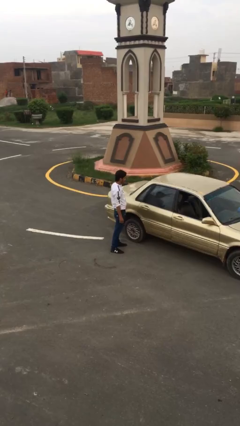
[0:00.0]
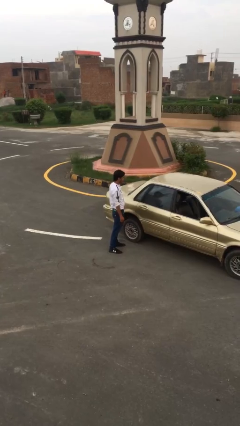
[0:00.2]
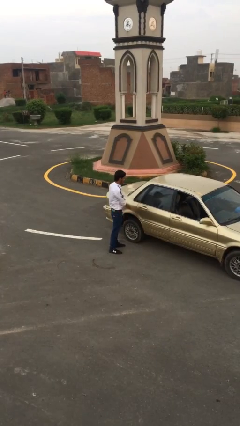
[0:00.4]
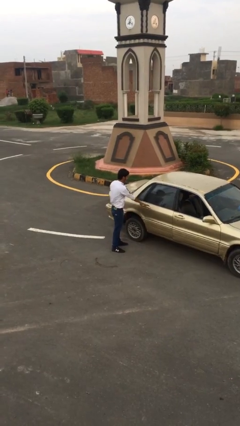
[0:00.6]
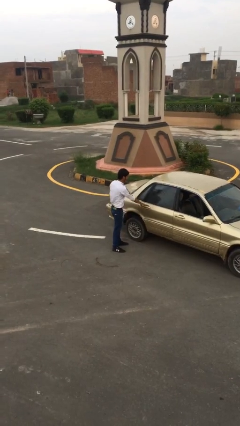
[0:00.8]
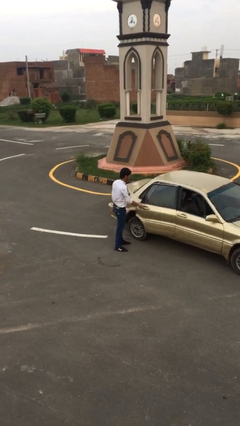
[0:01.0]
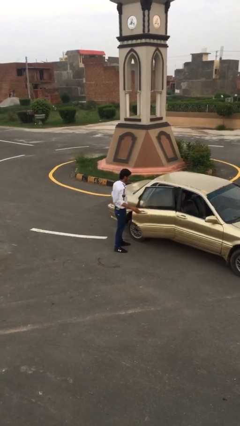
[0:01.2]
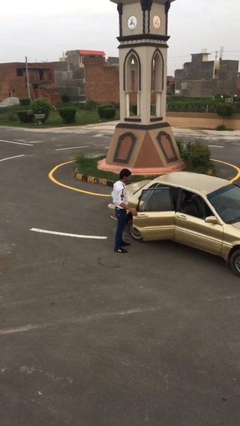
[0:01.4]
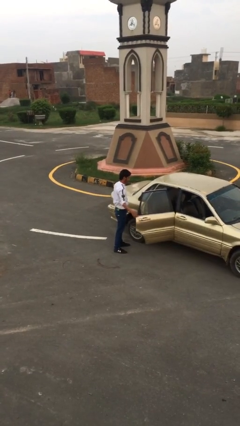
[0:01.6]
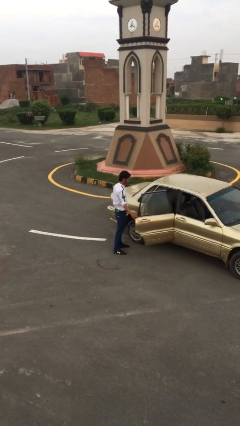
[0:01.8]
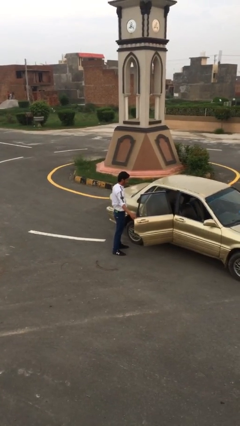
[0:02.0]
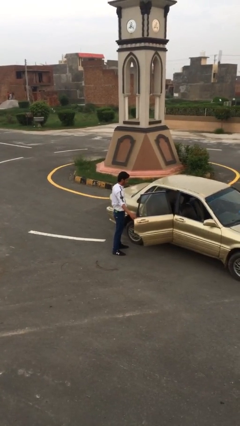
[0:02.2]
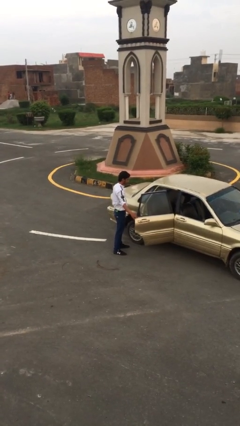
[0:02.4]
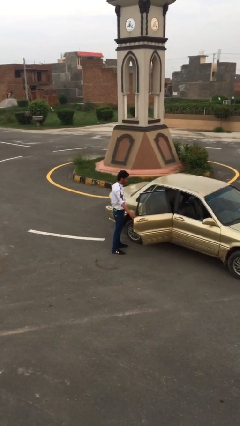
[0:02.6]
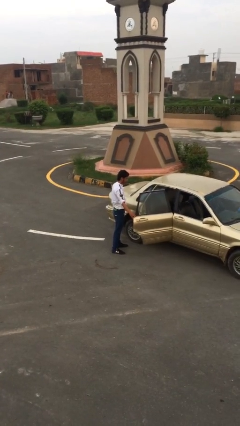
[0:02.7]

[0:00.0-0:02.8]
person opens car door

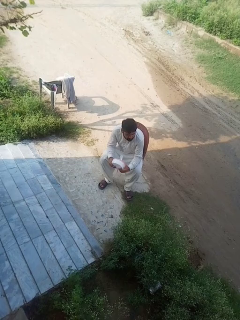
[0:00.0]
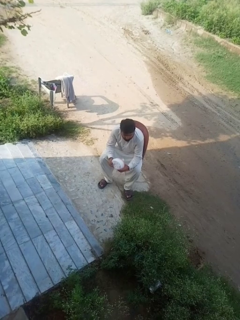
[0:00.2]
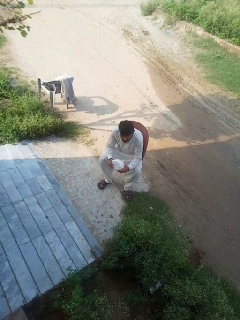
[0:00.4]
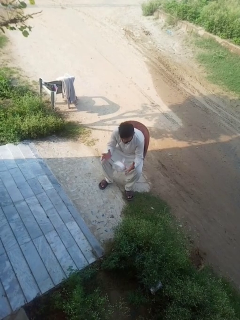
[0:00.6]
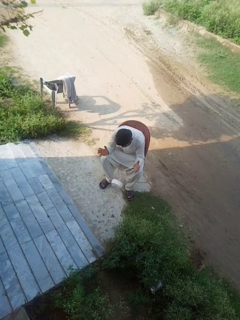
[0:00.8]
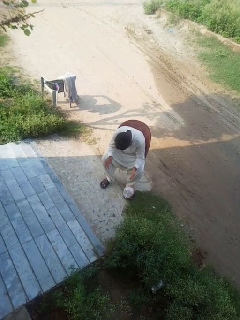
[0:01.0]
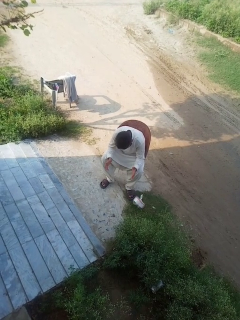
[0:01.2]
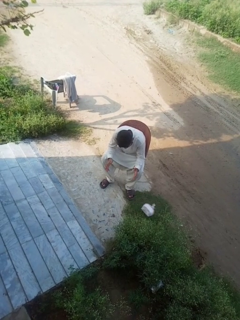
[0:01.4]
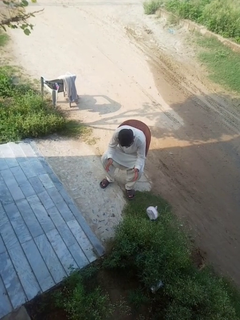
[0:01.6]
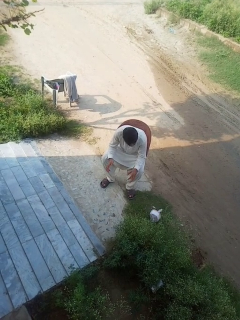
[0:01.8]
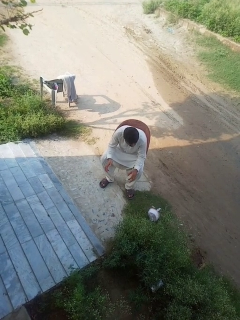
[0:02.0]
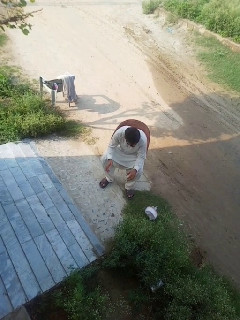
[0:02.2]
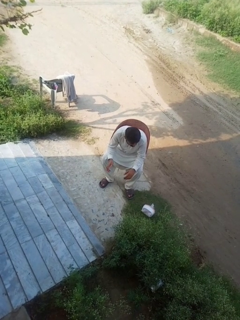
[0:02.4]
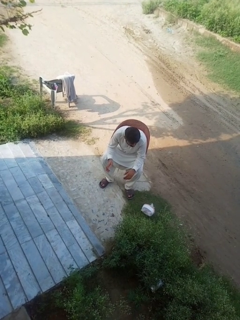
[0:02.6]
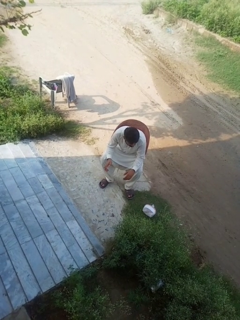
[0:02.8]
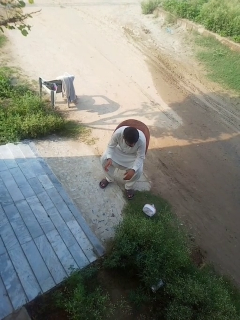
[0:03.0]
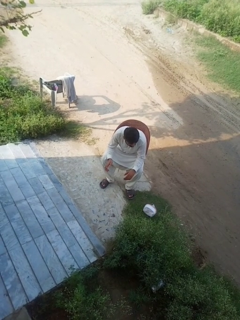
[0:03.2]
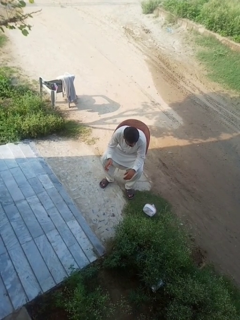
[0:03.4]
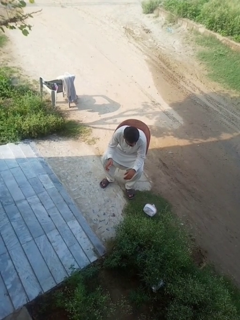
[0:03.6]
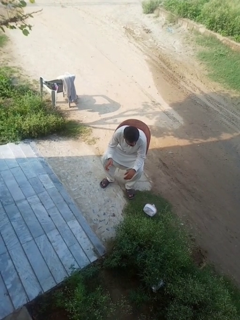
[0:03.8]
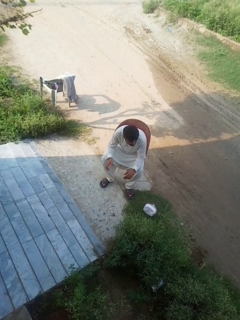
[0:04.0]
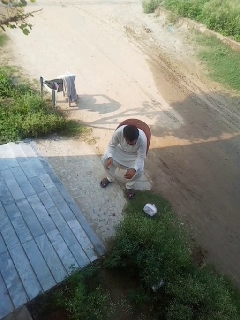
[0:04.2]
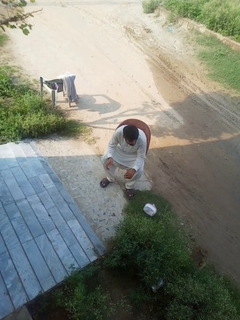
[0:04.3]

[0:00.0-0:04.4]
person drops object

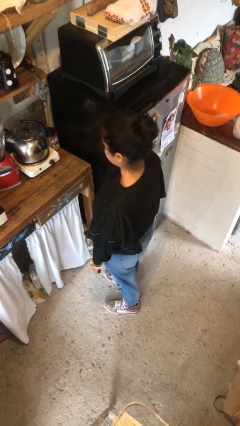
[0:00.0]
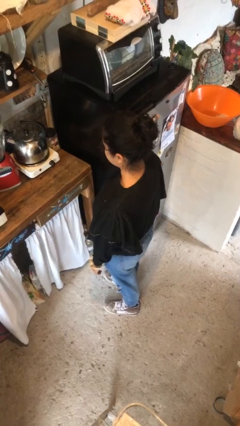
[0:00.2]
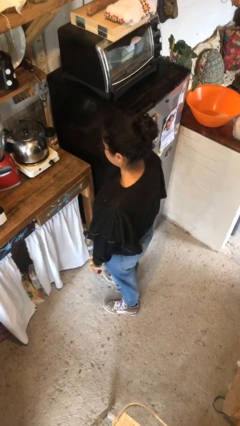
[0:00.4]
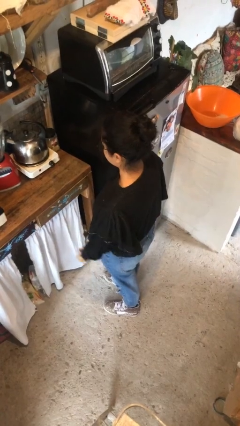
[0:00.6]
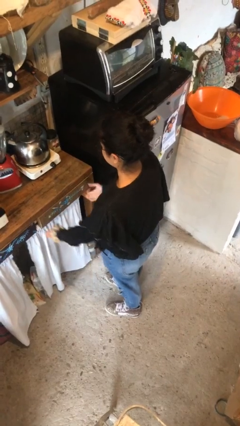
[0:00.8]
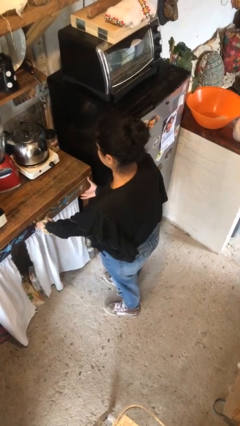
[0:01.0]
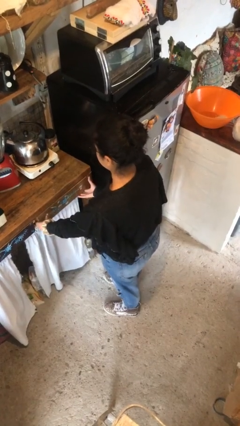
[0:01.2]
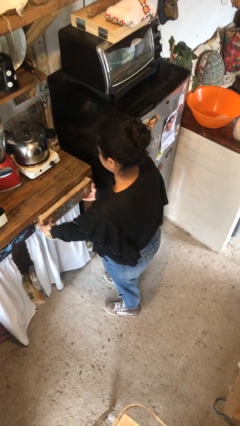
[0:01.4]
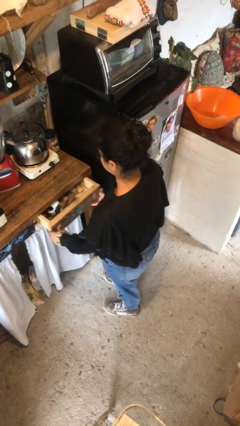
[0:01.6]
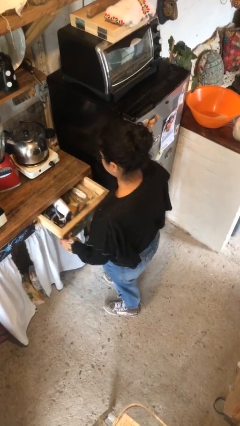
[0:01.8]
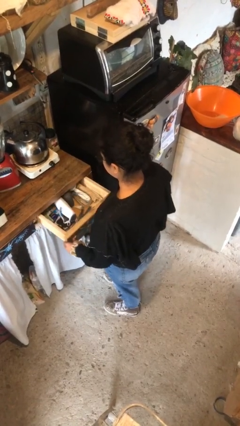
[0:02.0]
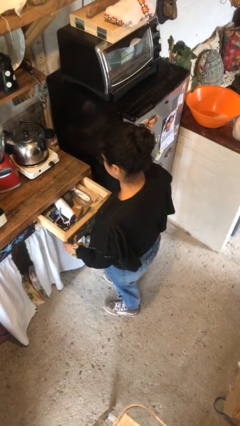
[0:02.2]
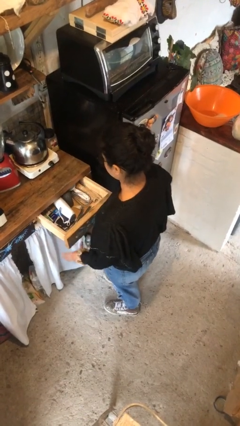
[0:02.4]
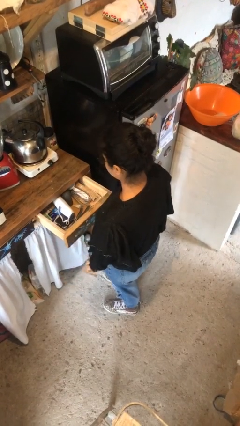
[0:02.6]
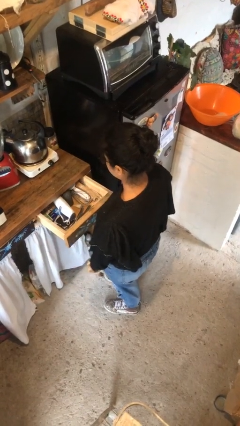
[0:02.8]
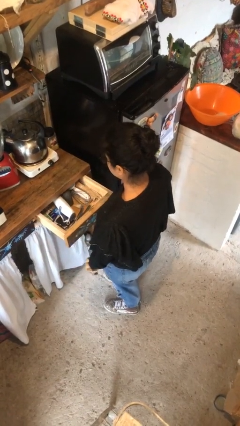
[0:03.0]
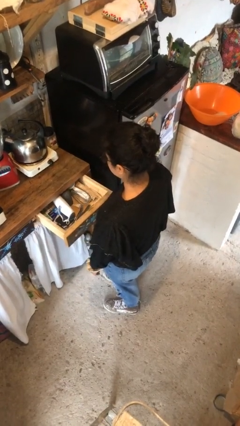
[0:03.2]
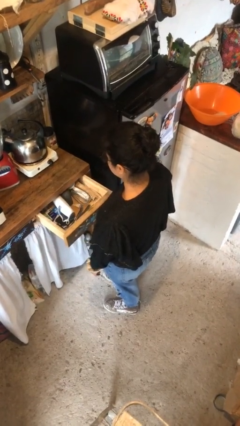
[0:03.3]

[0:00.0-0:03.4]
person opens kitchen drawer

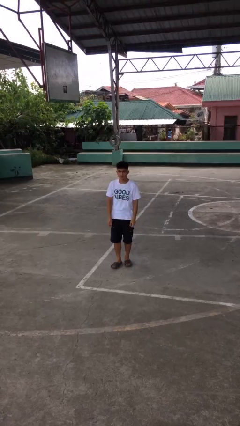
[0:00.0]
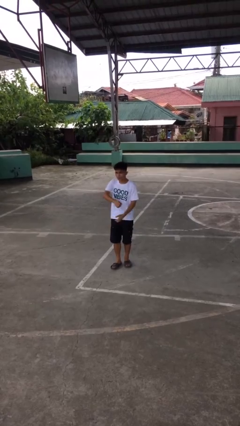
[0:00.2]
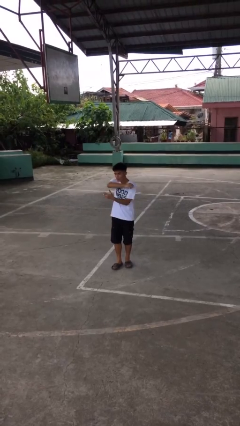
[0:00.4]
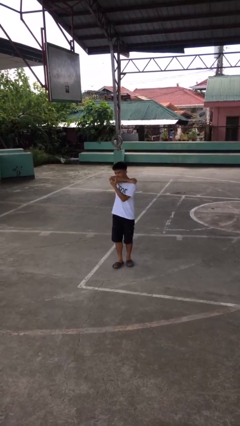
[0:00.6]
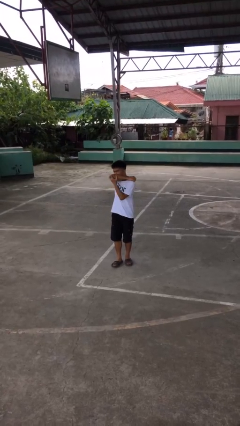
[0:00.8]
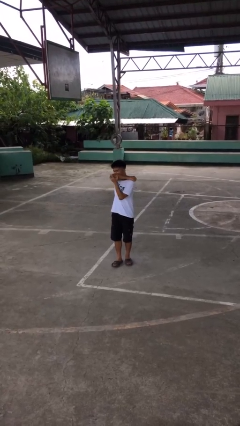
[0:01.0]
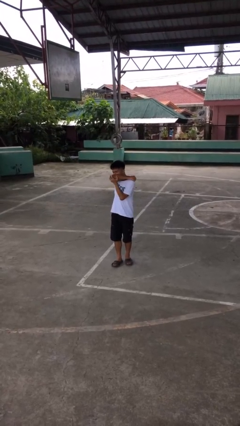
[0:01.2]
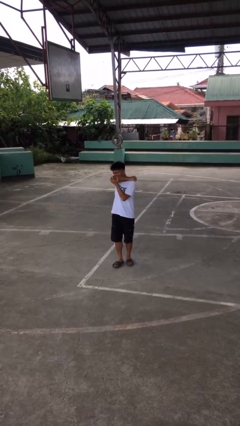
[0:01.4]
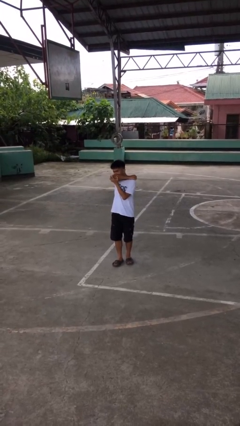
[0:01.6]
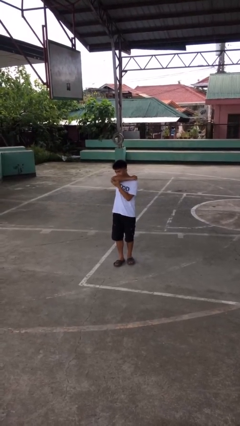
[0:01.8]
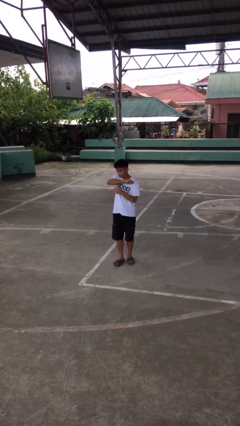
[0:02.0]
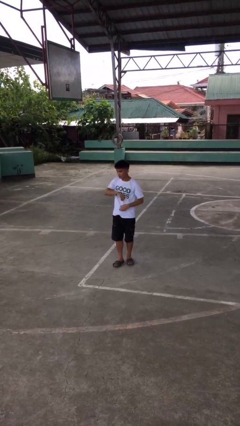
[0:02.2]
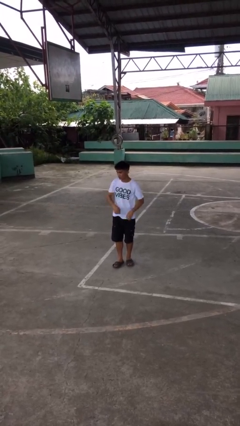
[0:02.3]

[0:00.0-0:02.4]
person sneezes into arm

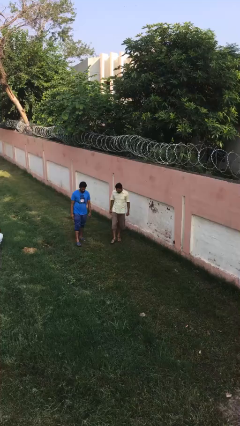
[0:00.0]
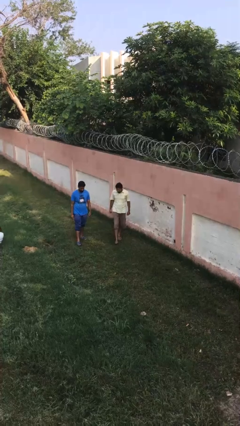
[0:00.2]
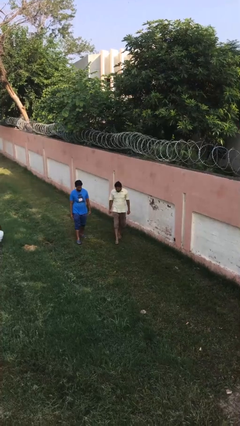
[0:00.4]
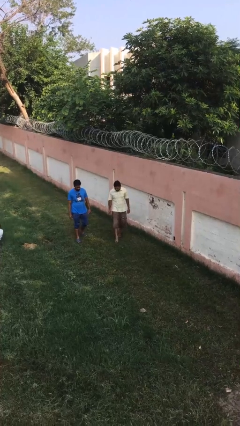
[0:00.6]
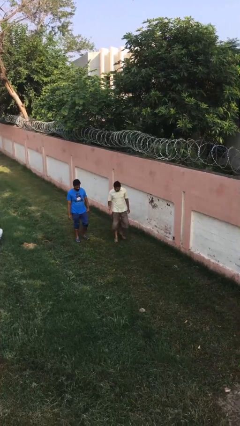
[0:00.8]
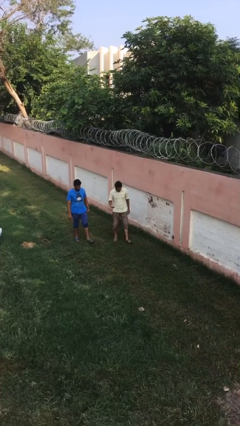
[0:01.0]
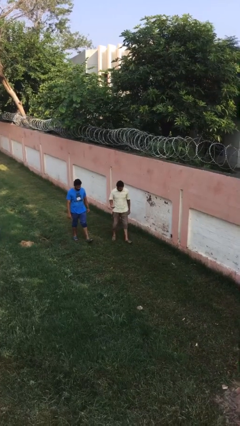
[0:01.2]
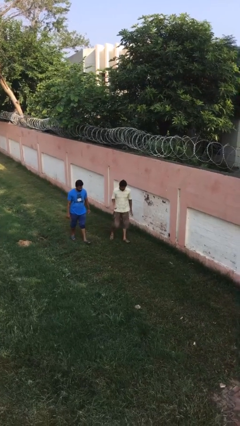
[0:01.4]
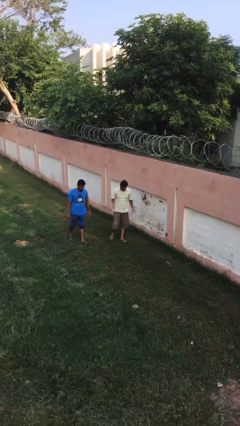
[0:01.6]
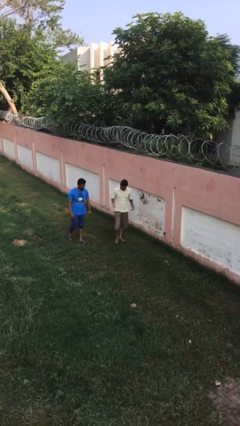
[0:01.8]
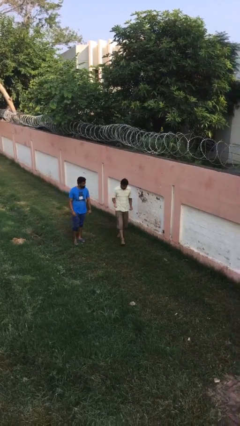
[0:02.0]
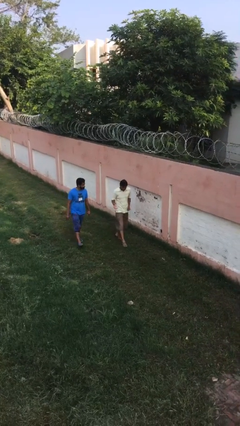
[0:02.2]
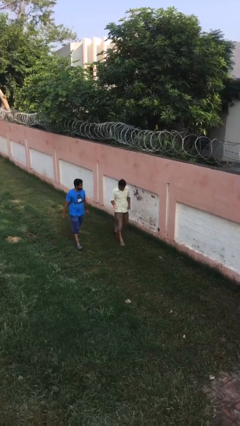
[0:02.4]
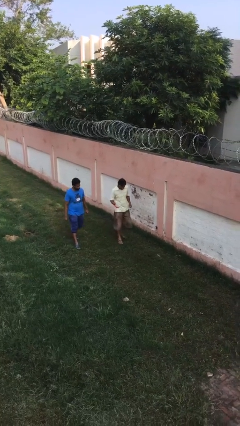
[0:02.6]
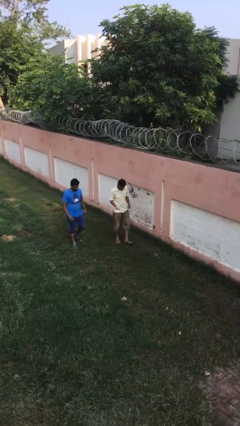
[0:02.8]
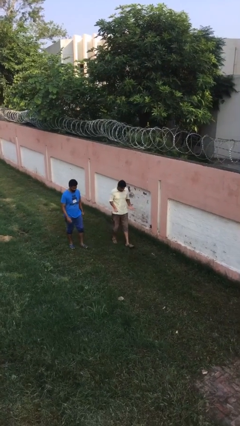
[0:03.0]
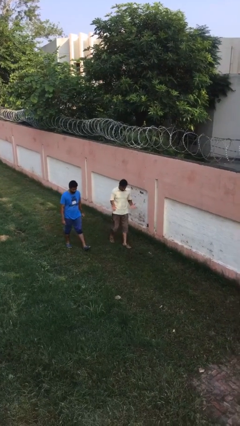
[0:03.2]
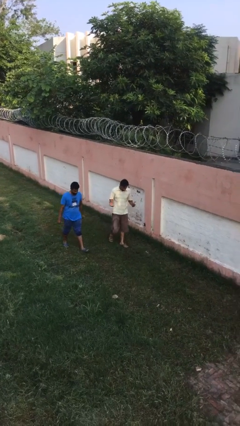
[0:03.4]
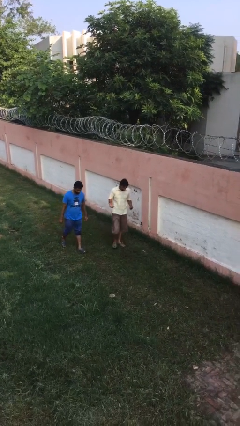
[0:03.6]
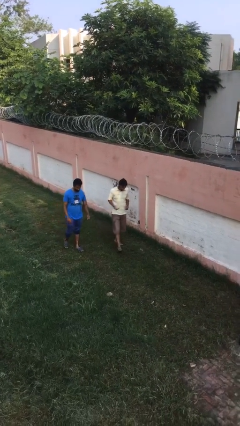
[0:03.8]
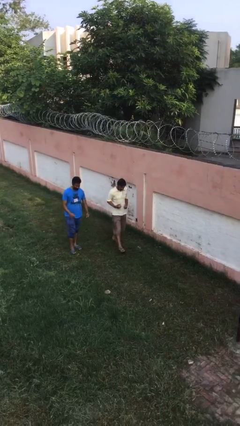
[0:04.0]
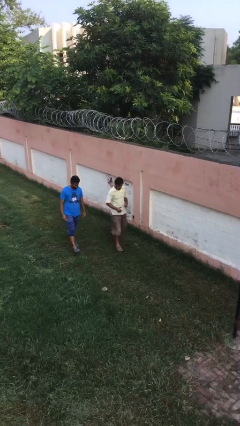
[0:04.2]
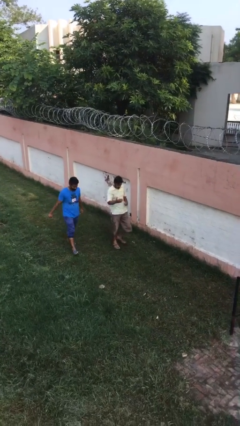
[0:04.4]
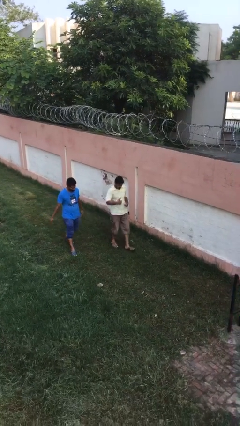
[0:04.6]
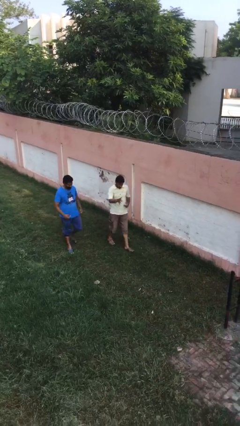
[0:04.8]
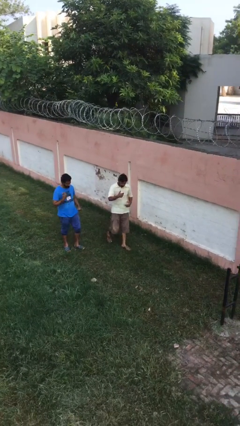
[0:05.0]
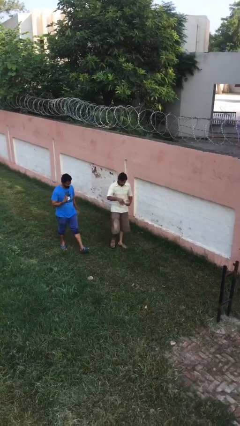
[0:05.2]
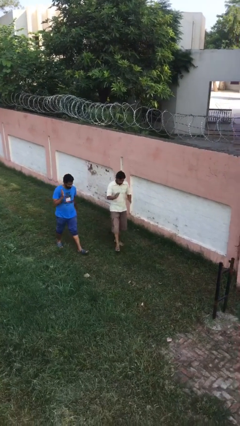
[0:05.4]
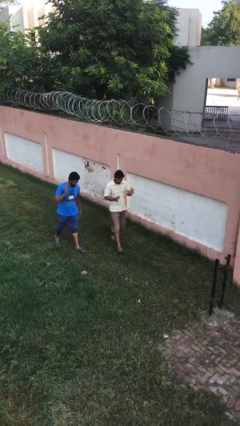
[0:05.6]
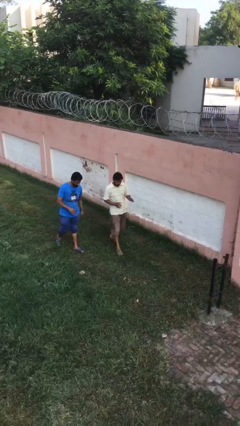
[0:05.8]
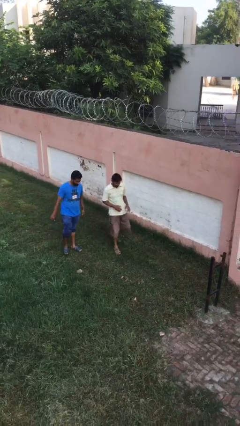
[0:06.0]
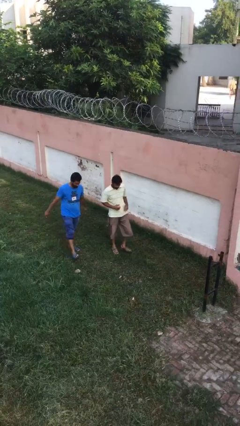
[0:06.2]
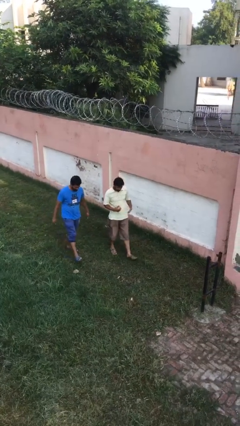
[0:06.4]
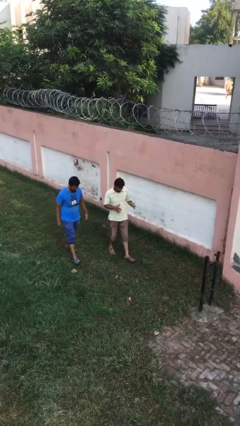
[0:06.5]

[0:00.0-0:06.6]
person talks to person
